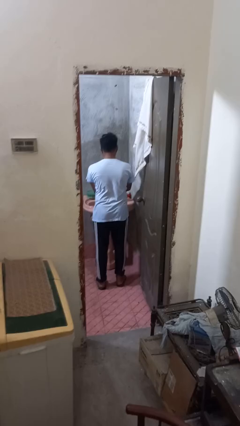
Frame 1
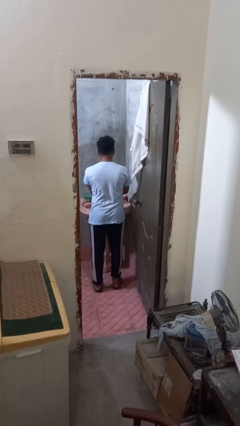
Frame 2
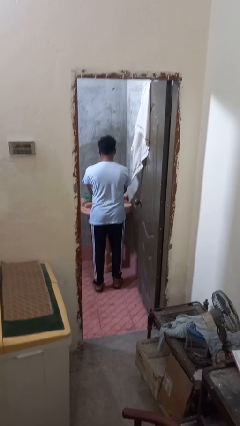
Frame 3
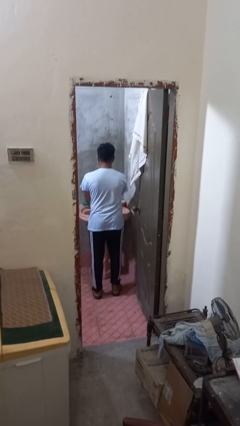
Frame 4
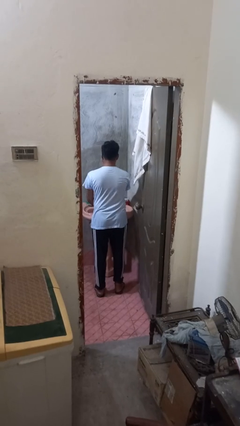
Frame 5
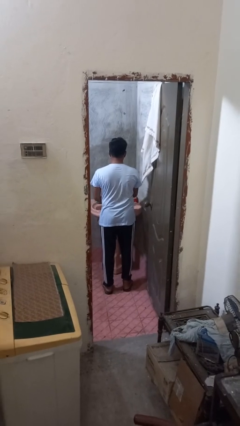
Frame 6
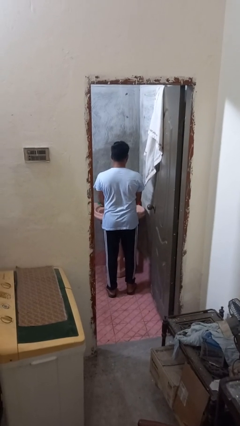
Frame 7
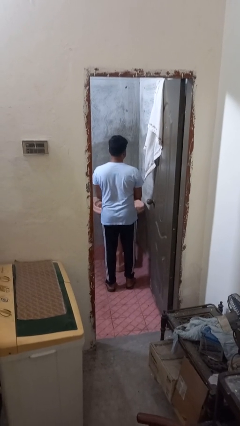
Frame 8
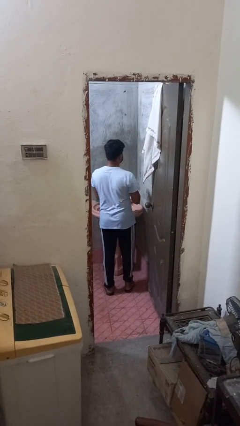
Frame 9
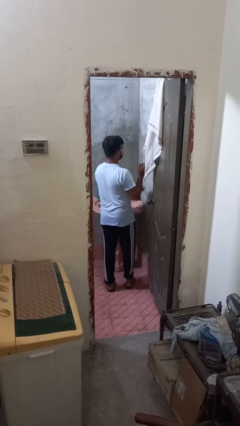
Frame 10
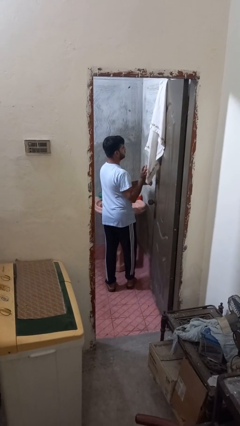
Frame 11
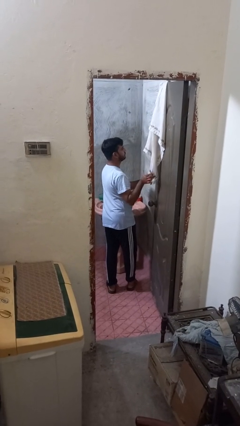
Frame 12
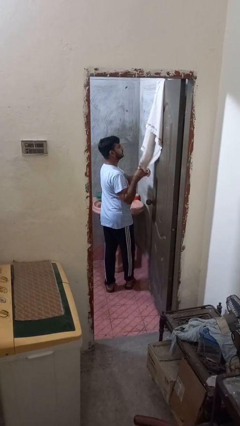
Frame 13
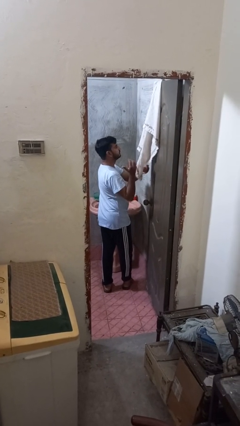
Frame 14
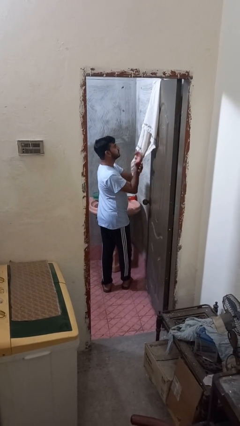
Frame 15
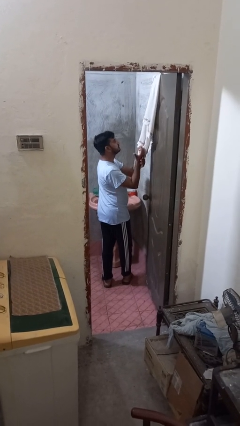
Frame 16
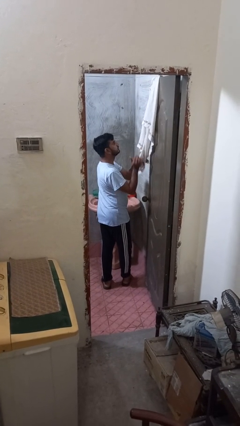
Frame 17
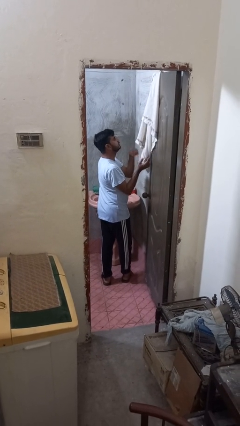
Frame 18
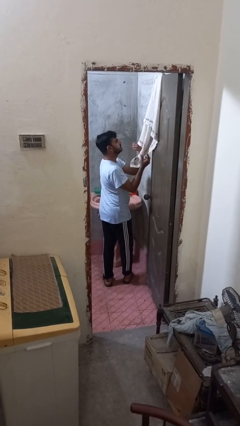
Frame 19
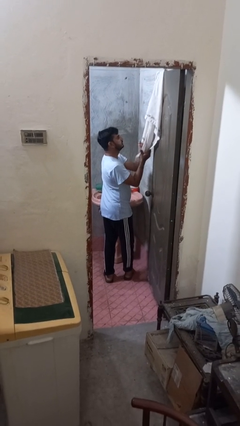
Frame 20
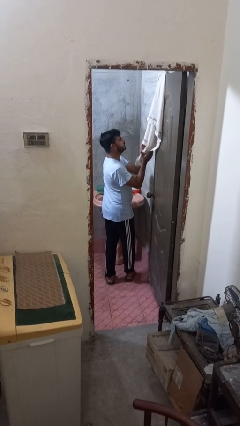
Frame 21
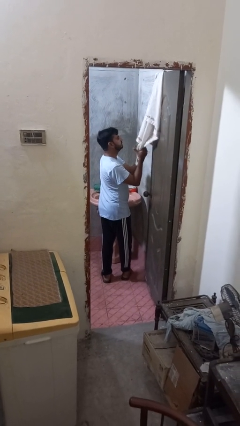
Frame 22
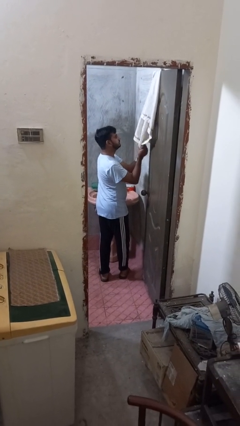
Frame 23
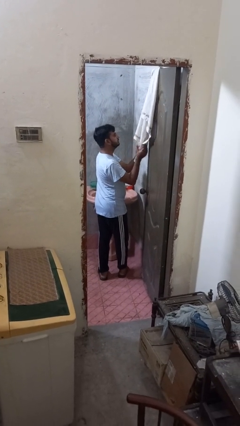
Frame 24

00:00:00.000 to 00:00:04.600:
person dries hands with towel

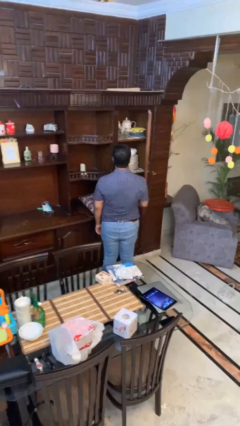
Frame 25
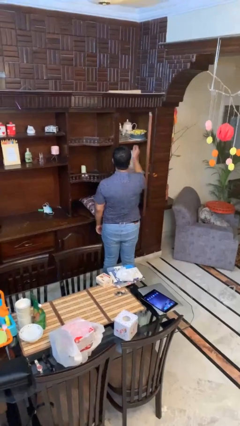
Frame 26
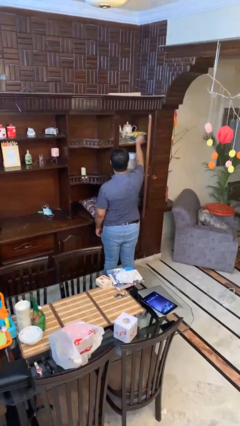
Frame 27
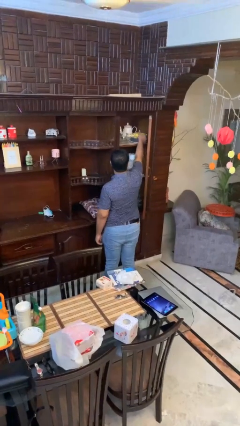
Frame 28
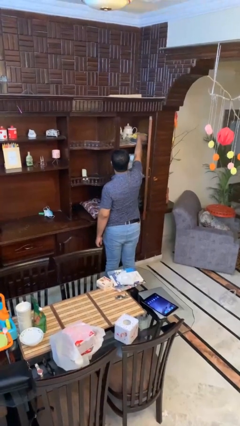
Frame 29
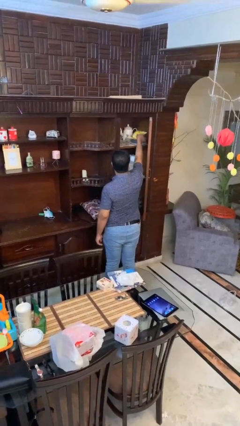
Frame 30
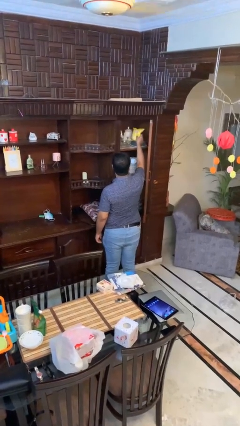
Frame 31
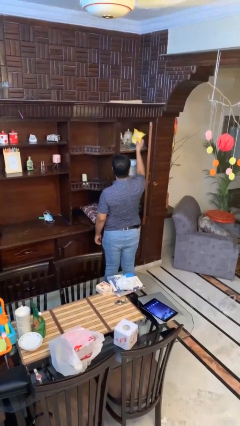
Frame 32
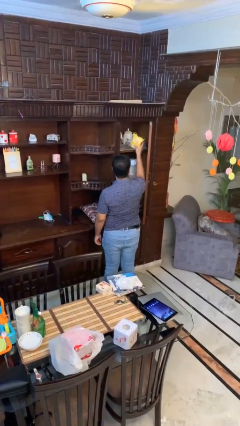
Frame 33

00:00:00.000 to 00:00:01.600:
person picks up object from cabinet

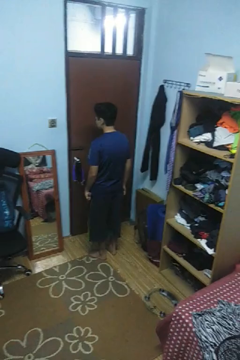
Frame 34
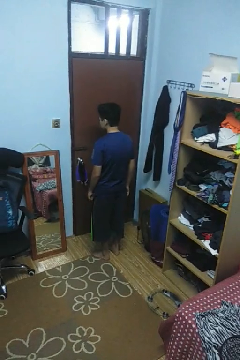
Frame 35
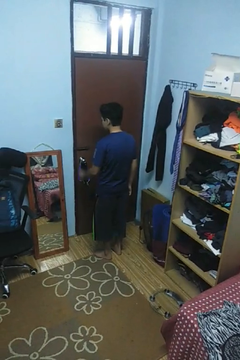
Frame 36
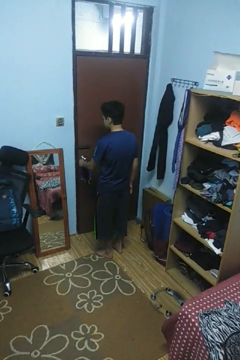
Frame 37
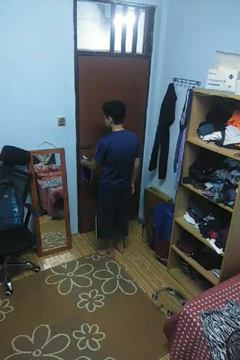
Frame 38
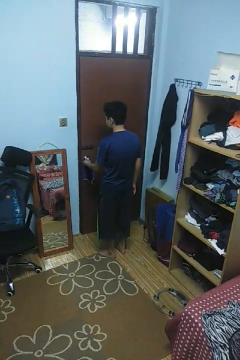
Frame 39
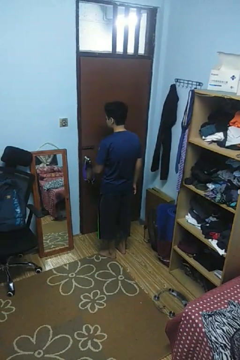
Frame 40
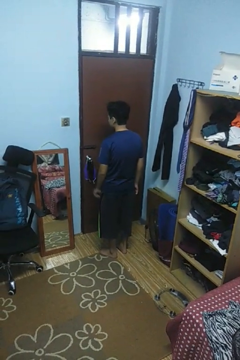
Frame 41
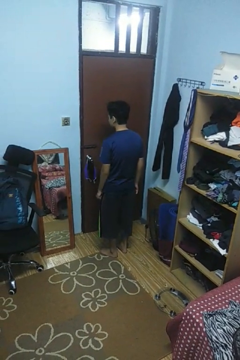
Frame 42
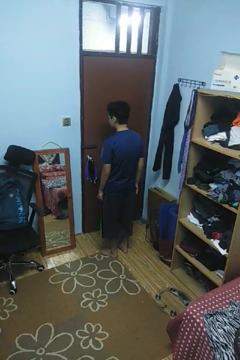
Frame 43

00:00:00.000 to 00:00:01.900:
person locks door with keys

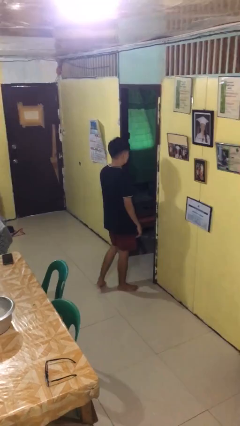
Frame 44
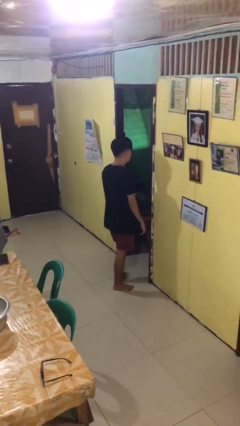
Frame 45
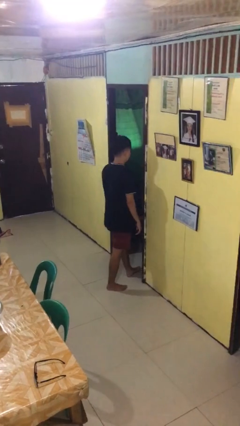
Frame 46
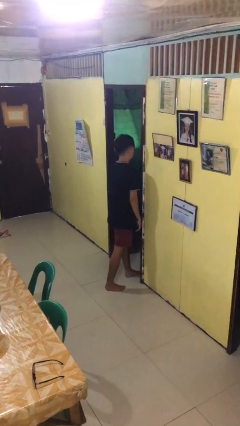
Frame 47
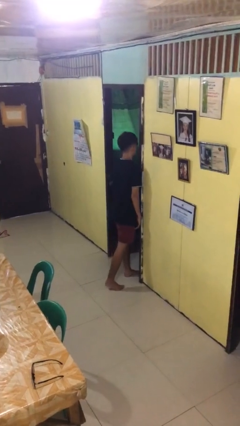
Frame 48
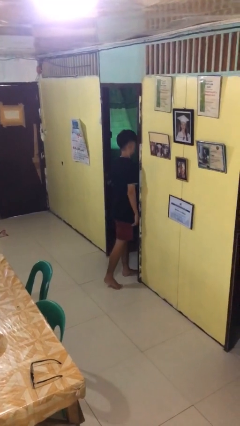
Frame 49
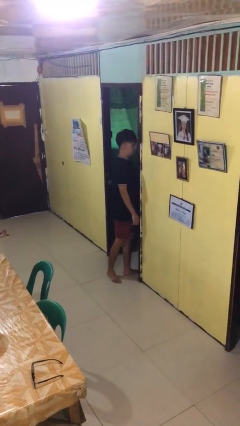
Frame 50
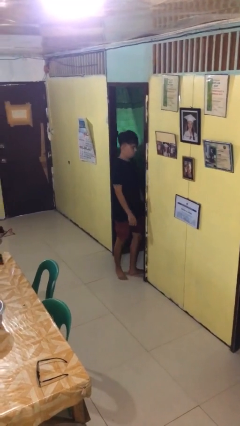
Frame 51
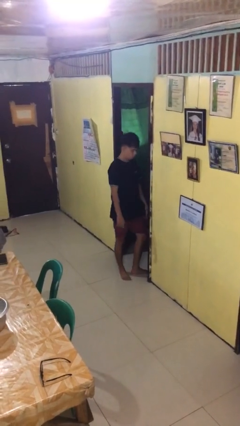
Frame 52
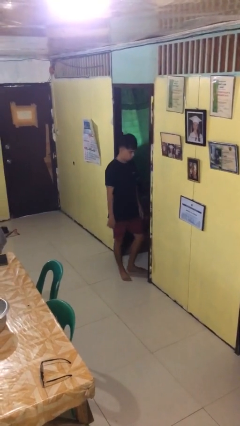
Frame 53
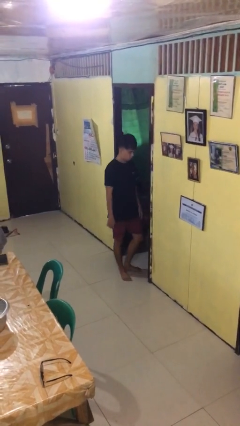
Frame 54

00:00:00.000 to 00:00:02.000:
person bumps into wall

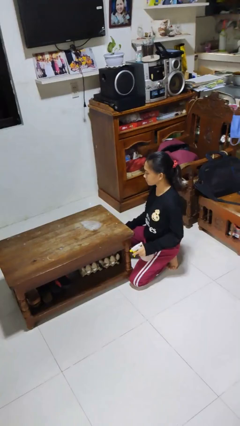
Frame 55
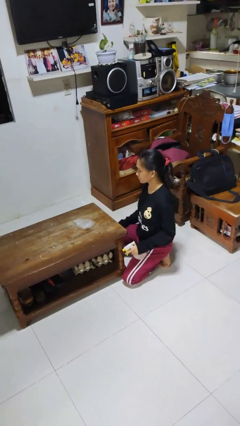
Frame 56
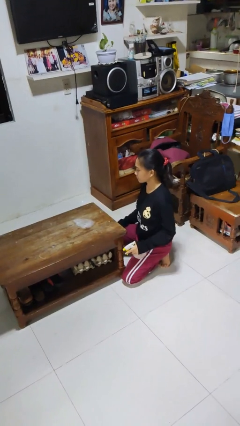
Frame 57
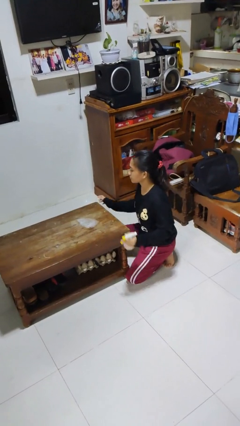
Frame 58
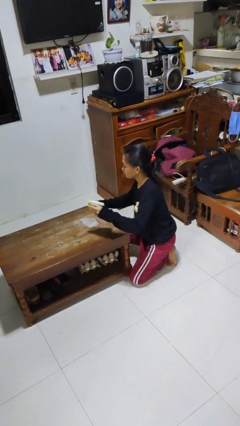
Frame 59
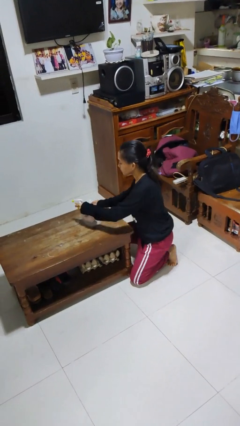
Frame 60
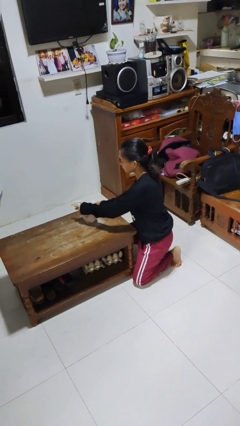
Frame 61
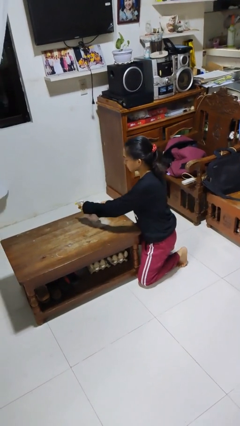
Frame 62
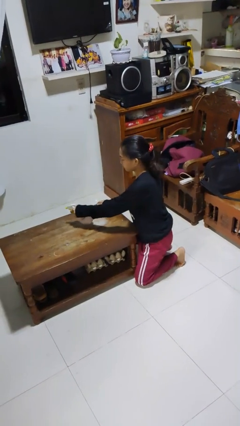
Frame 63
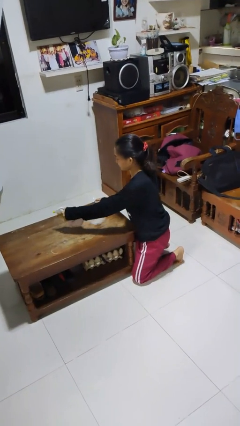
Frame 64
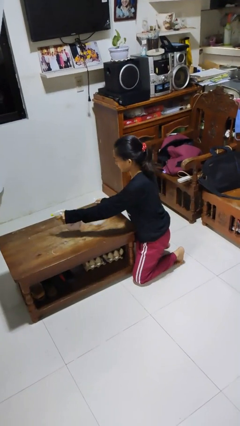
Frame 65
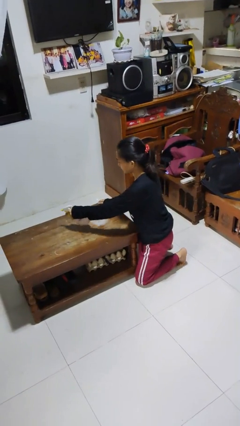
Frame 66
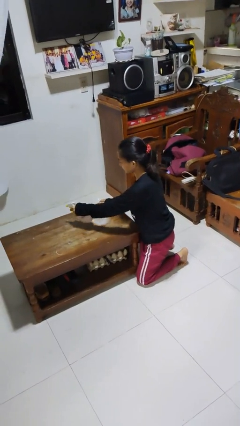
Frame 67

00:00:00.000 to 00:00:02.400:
person sprays from bottle

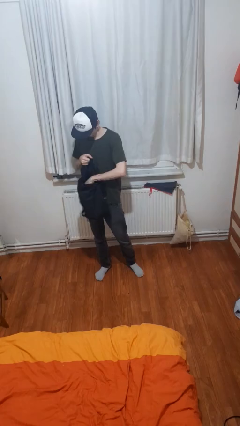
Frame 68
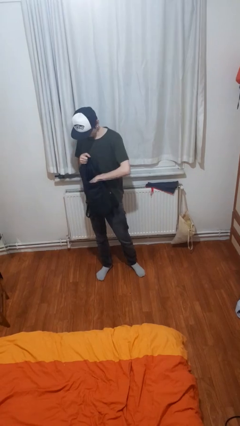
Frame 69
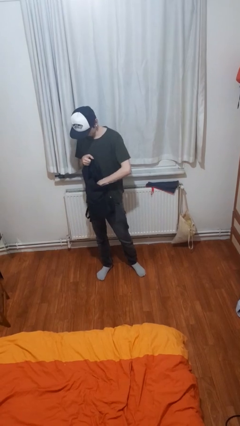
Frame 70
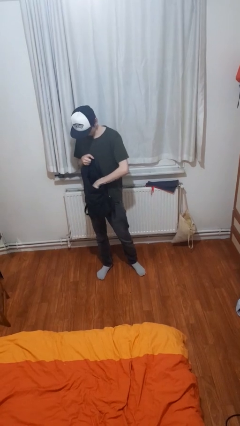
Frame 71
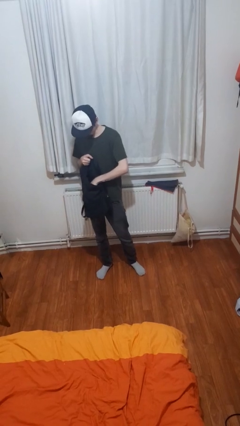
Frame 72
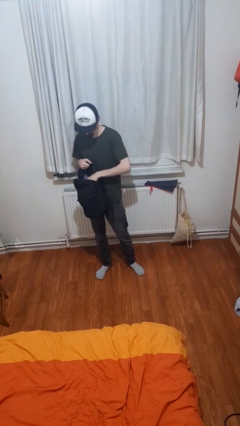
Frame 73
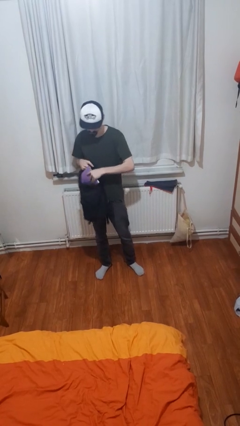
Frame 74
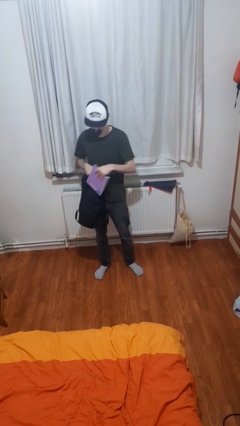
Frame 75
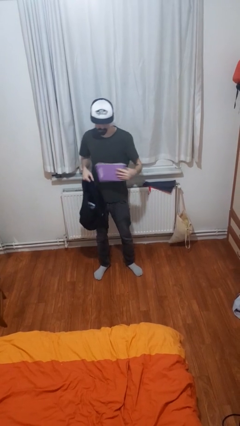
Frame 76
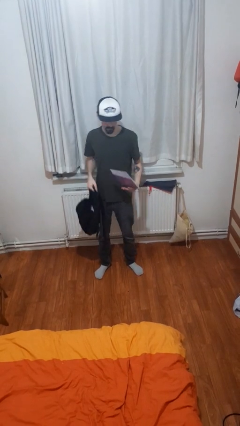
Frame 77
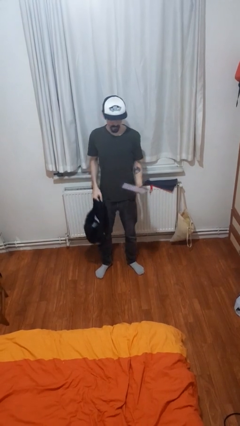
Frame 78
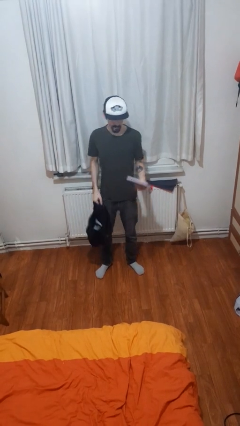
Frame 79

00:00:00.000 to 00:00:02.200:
person takes object from backpack

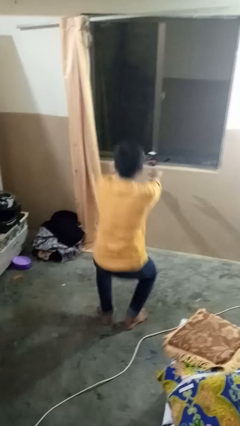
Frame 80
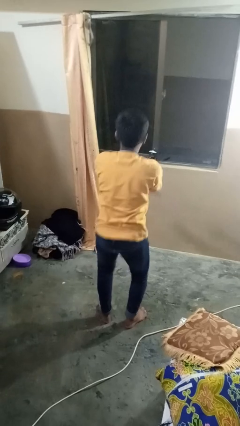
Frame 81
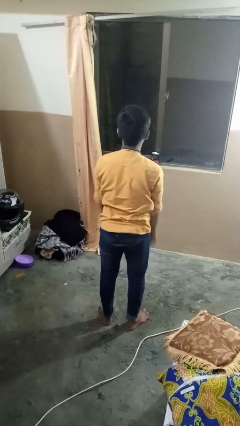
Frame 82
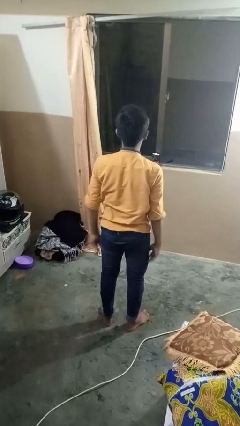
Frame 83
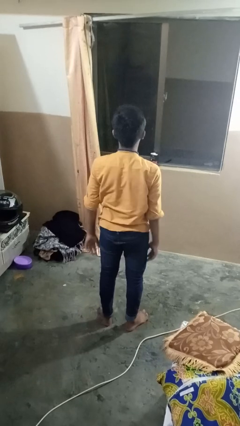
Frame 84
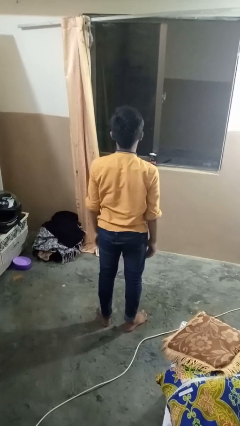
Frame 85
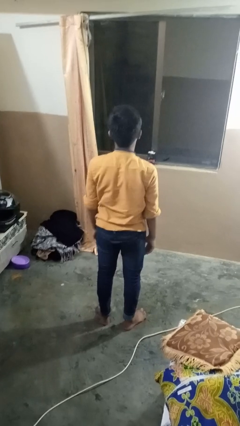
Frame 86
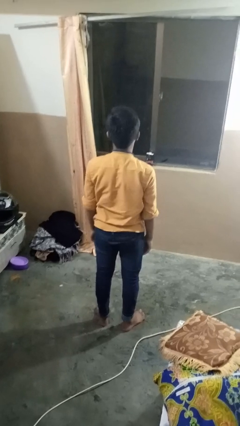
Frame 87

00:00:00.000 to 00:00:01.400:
person stands up

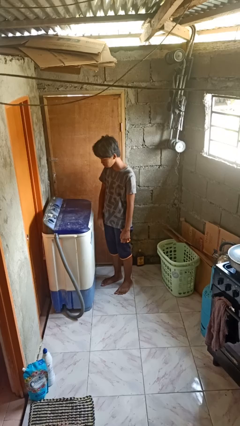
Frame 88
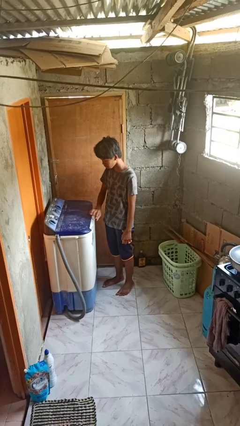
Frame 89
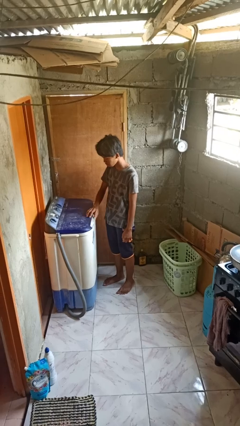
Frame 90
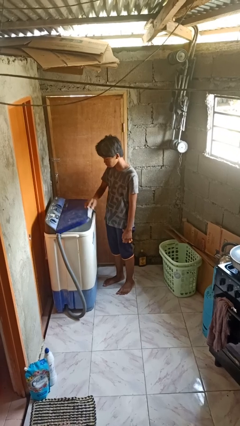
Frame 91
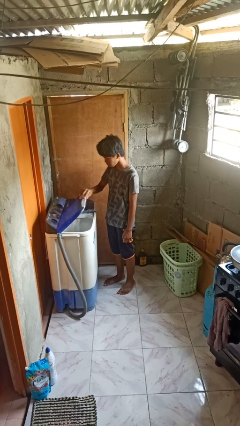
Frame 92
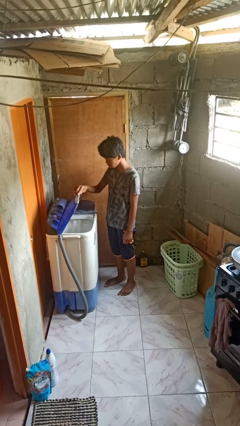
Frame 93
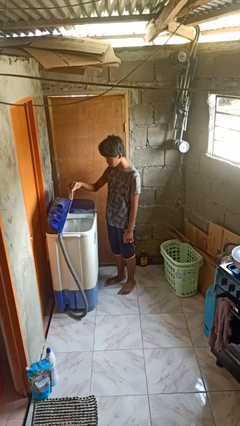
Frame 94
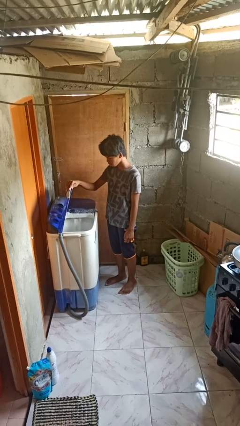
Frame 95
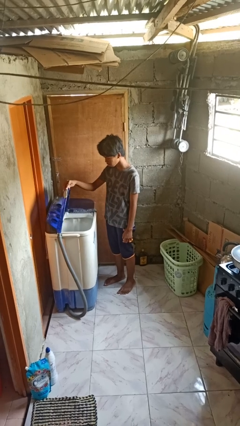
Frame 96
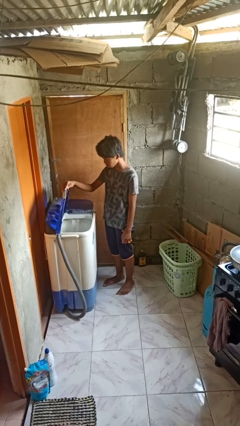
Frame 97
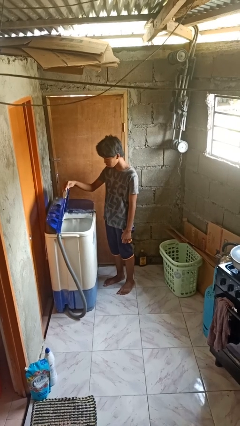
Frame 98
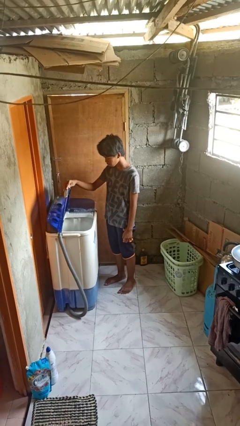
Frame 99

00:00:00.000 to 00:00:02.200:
person opens clothes washer
